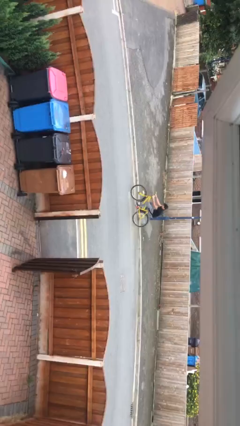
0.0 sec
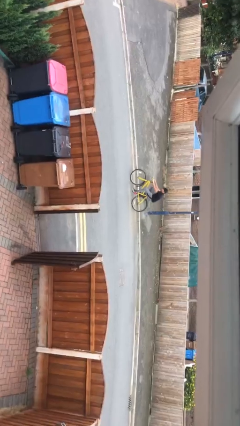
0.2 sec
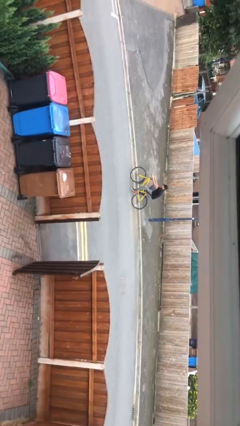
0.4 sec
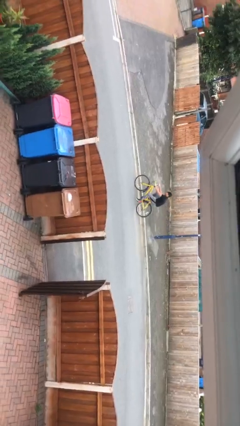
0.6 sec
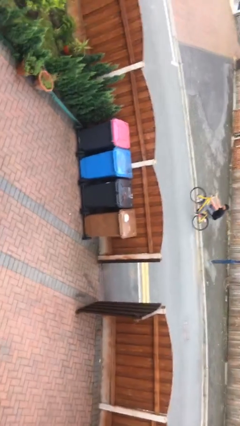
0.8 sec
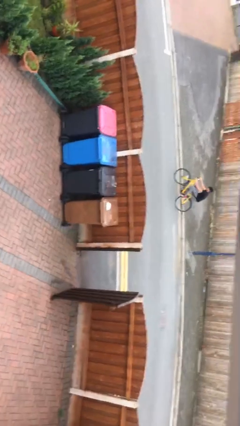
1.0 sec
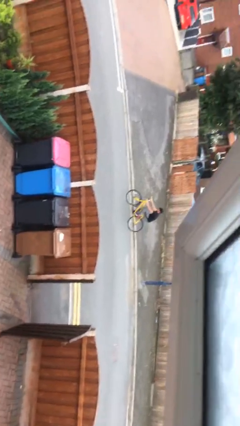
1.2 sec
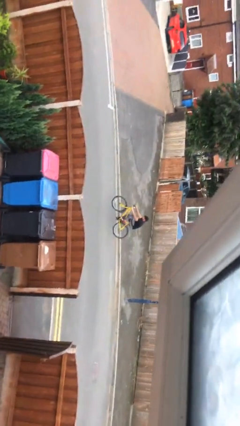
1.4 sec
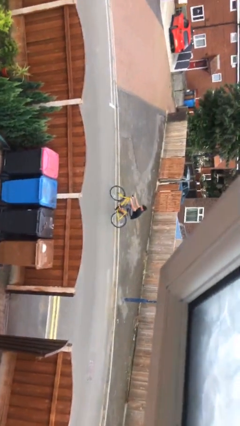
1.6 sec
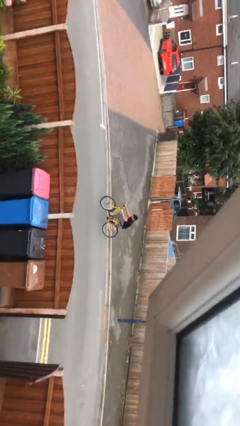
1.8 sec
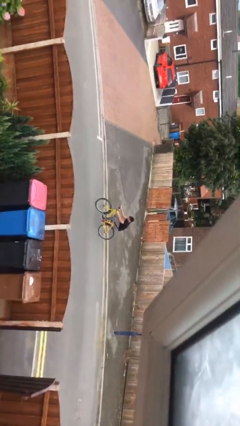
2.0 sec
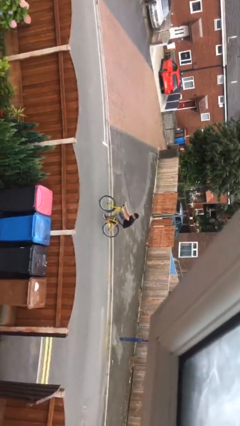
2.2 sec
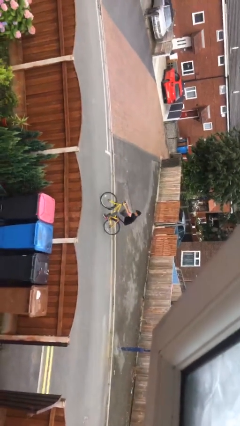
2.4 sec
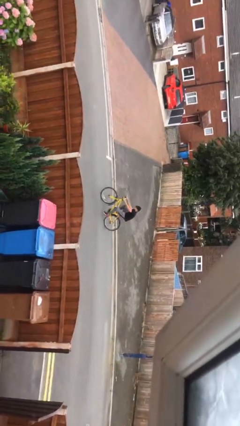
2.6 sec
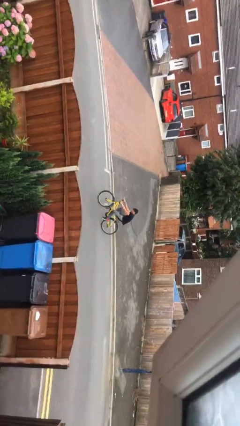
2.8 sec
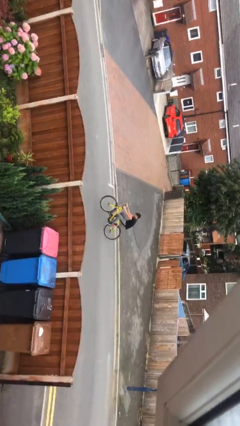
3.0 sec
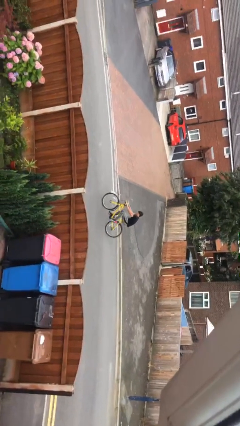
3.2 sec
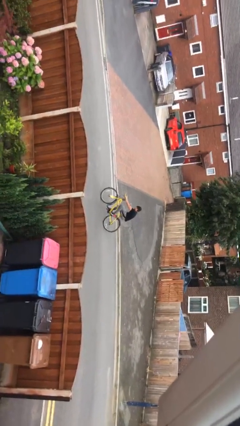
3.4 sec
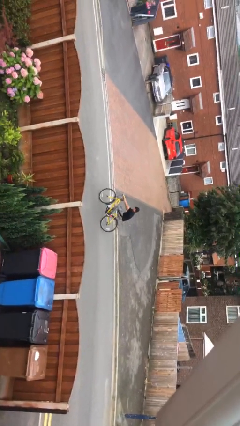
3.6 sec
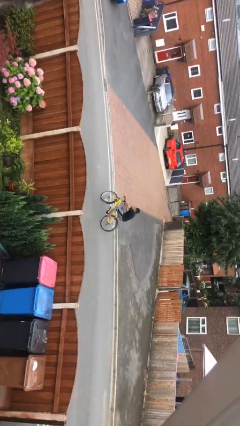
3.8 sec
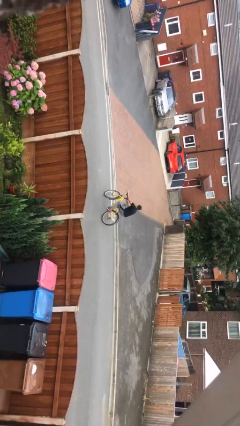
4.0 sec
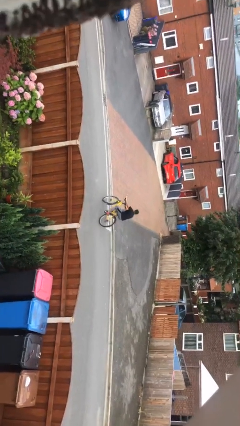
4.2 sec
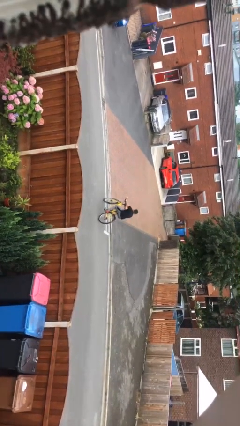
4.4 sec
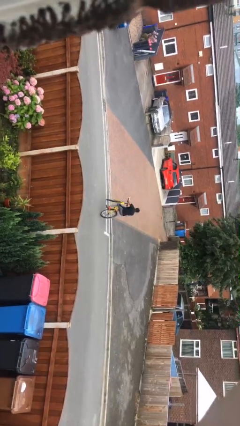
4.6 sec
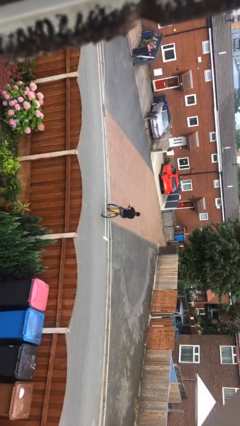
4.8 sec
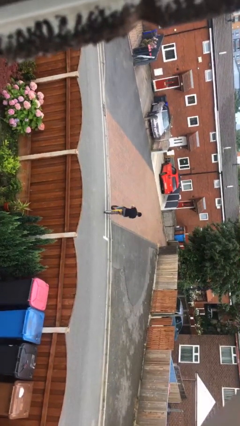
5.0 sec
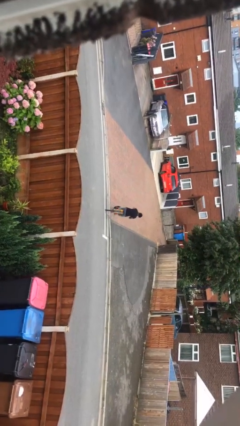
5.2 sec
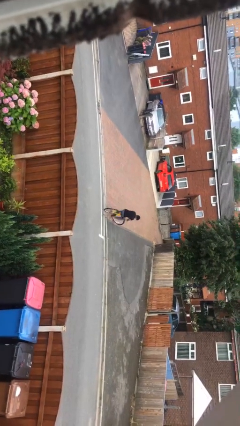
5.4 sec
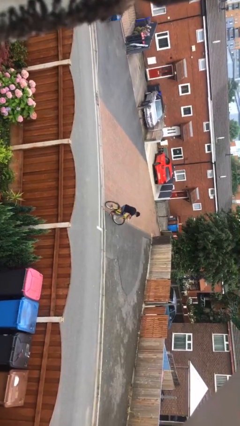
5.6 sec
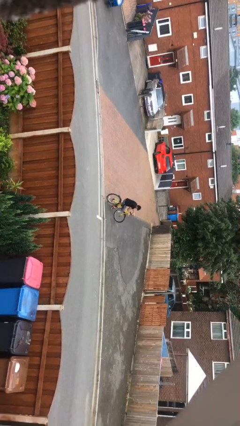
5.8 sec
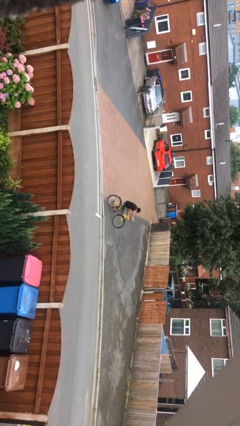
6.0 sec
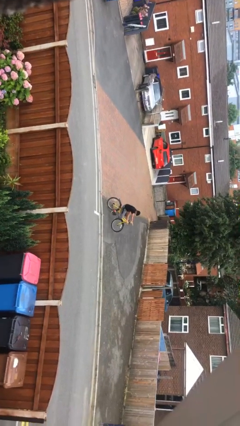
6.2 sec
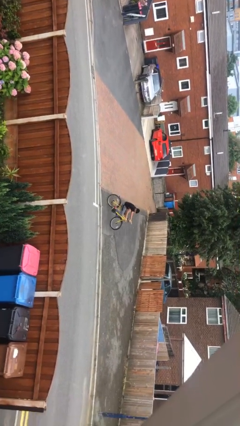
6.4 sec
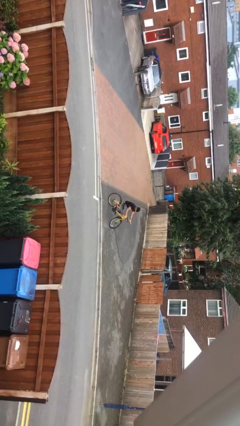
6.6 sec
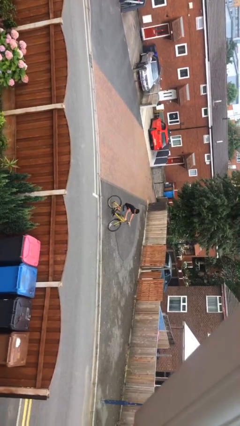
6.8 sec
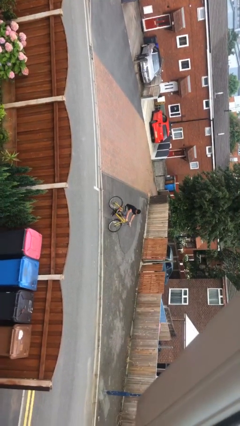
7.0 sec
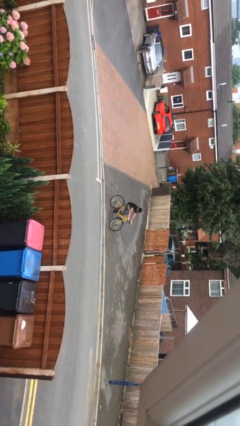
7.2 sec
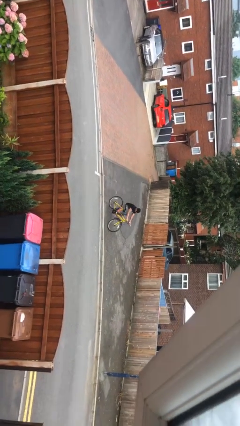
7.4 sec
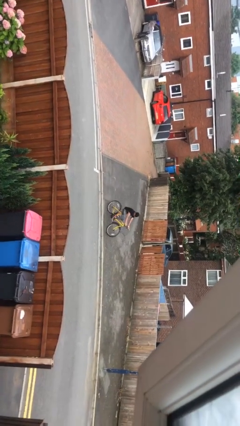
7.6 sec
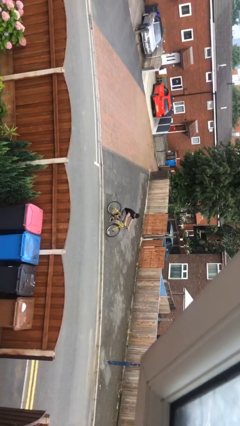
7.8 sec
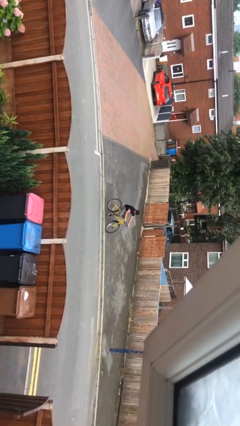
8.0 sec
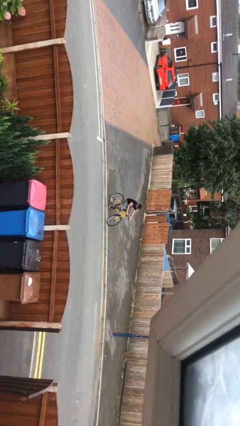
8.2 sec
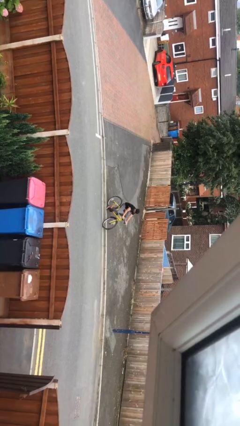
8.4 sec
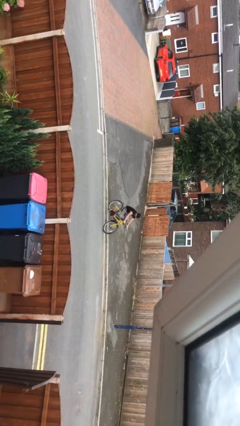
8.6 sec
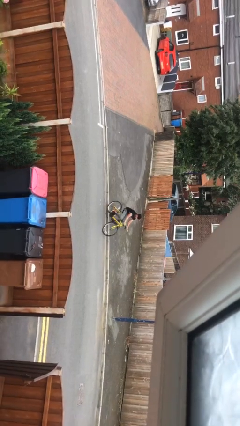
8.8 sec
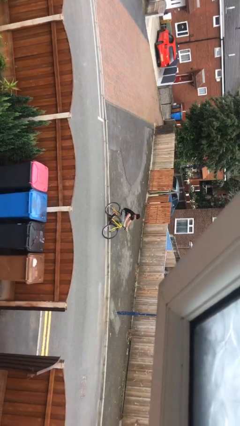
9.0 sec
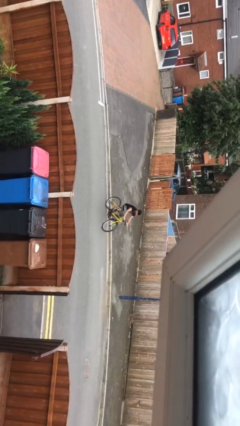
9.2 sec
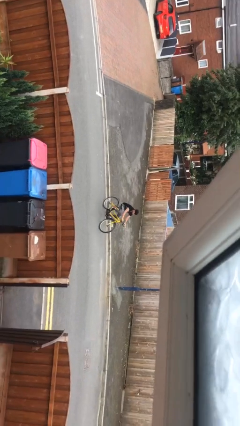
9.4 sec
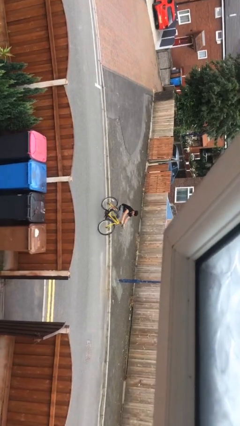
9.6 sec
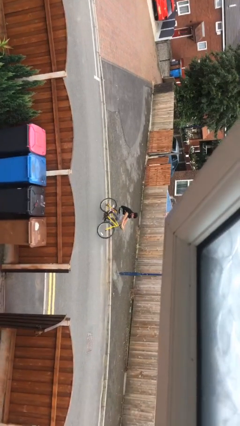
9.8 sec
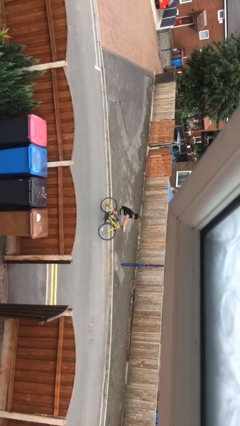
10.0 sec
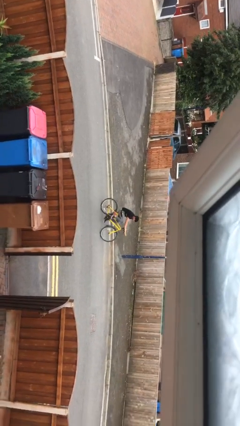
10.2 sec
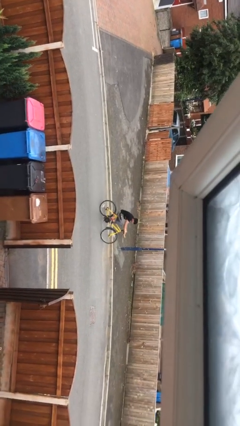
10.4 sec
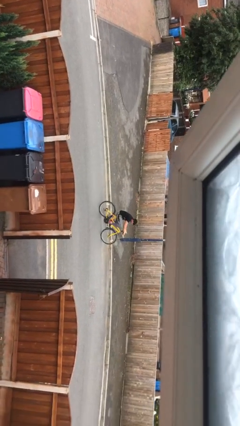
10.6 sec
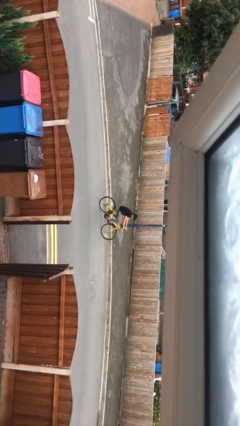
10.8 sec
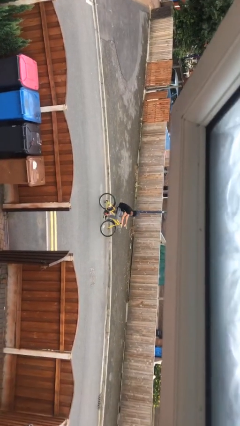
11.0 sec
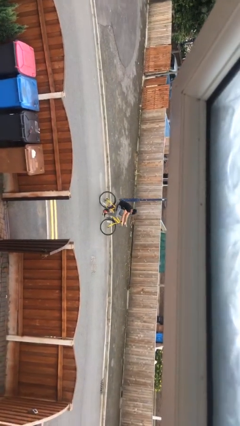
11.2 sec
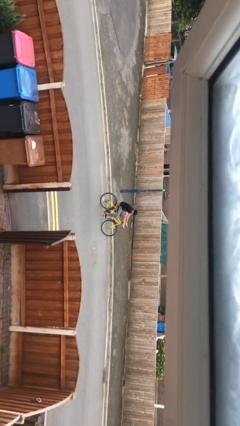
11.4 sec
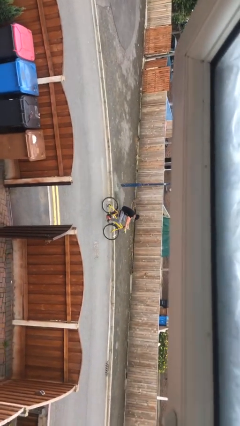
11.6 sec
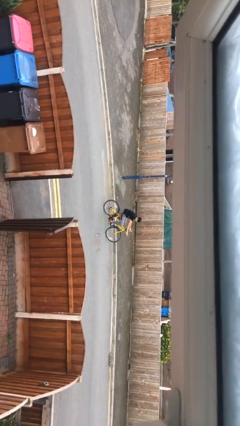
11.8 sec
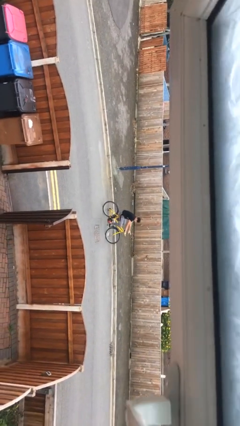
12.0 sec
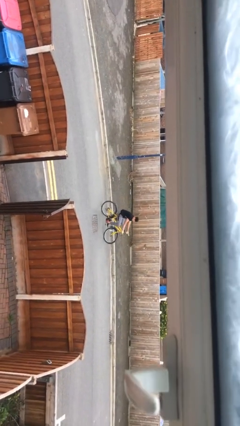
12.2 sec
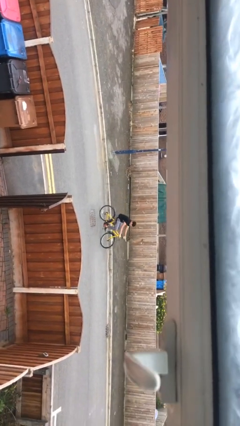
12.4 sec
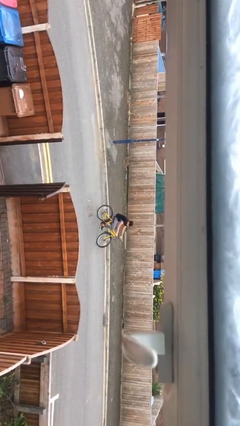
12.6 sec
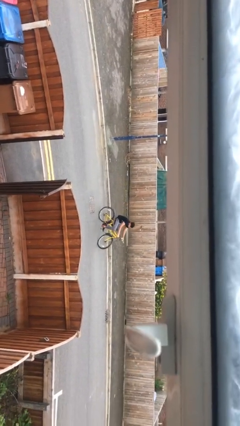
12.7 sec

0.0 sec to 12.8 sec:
person rides bicycle

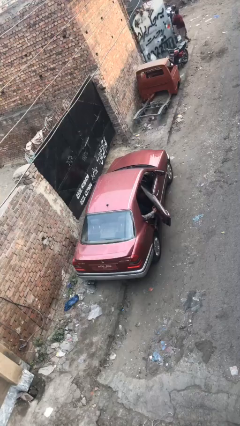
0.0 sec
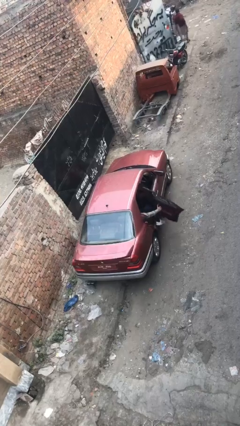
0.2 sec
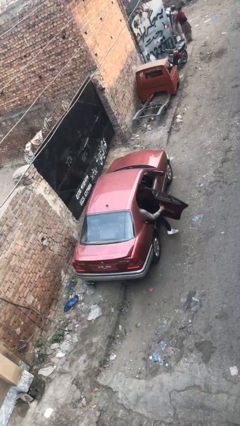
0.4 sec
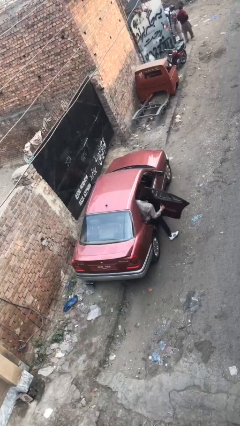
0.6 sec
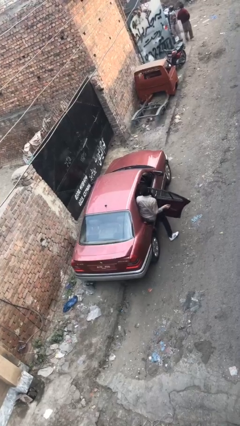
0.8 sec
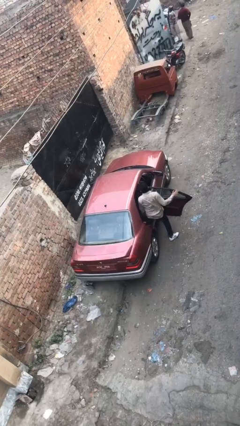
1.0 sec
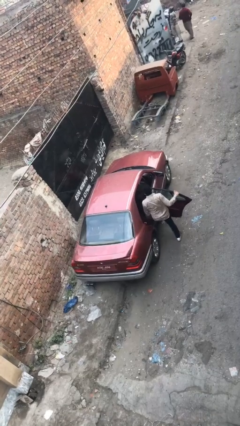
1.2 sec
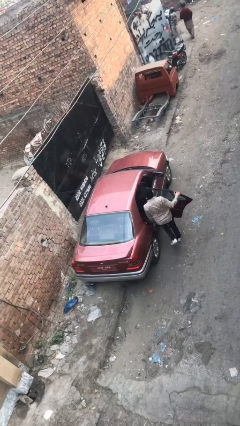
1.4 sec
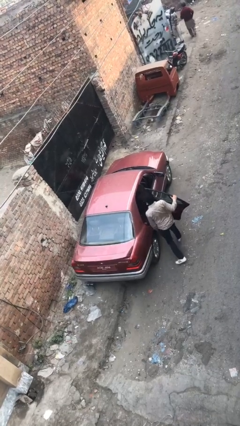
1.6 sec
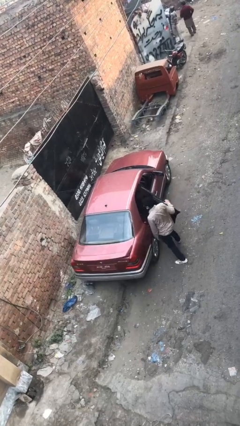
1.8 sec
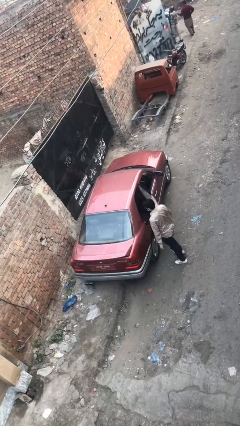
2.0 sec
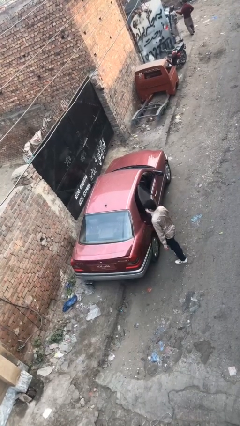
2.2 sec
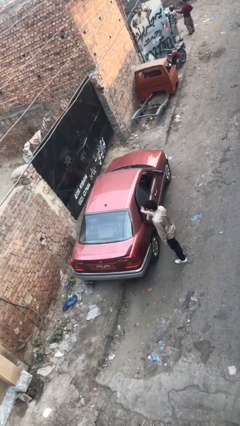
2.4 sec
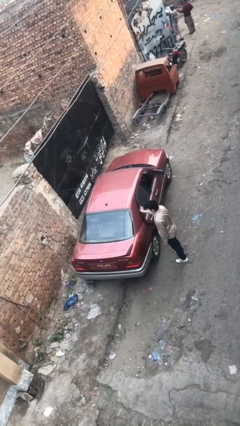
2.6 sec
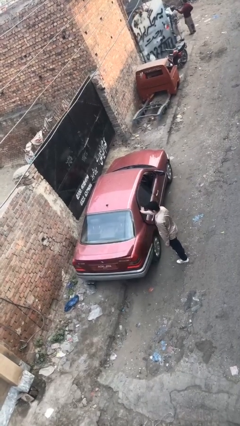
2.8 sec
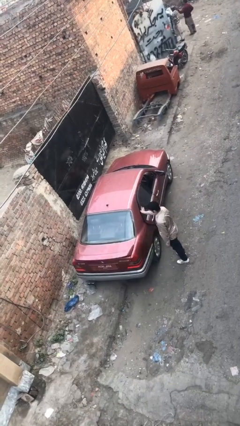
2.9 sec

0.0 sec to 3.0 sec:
car drops off person

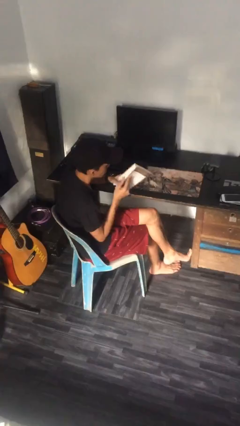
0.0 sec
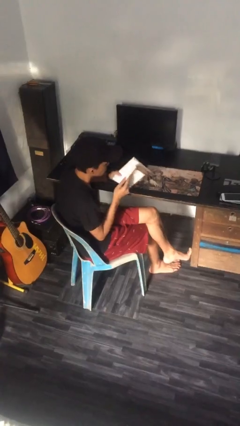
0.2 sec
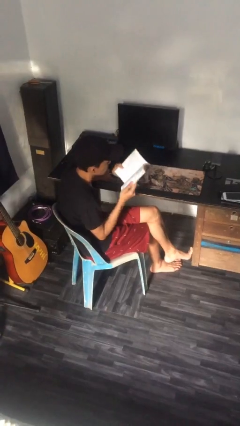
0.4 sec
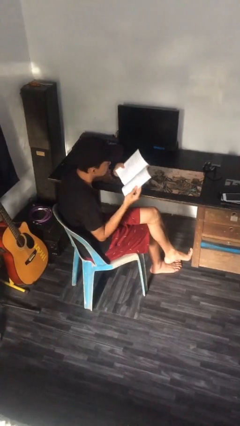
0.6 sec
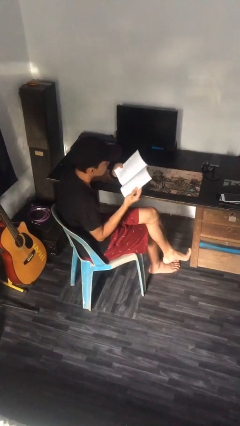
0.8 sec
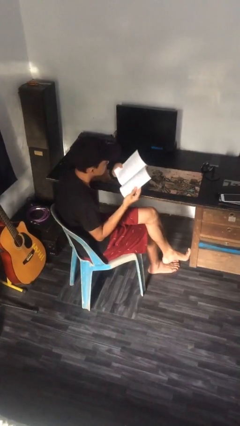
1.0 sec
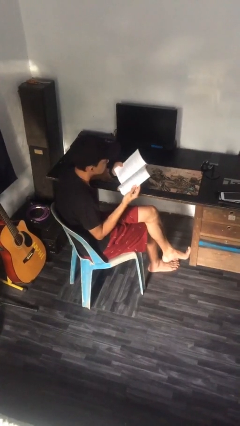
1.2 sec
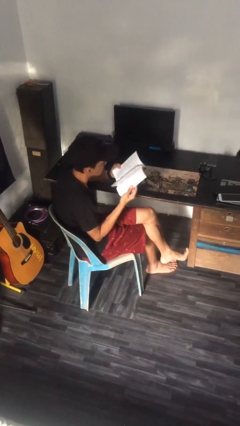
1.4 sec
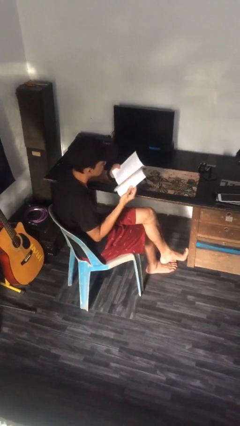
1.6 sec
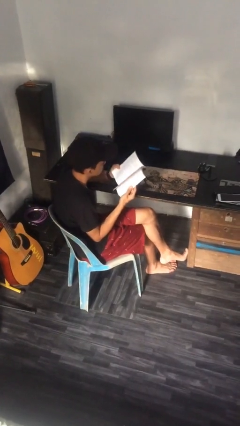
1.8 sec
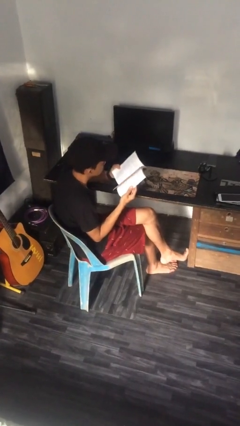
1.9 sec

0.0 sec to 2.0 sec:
person reads document
